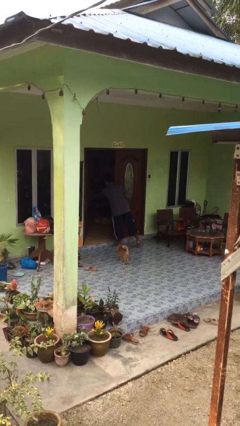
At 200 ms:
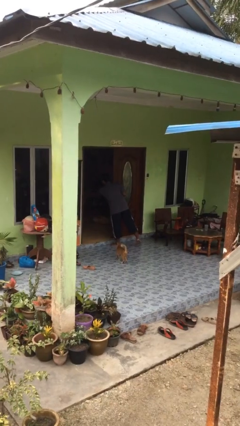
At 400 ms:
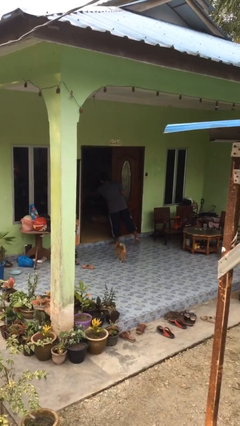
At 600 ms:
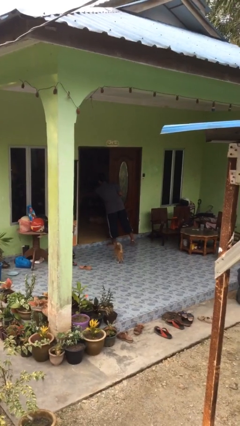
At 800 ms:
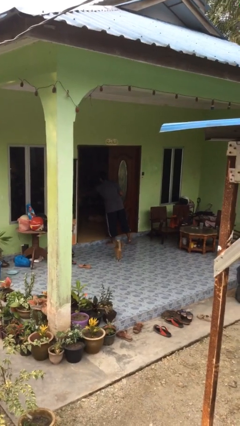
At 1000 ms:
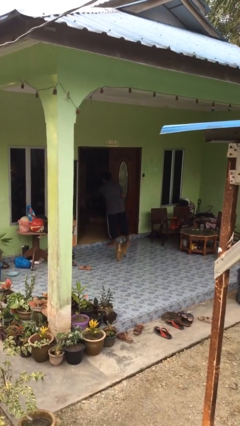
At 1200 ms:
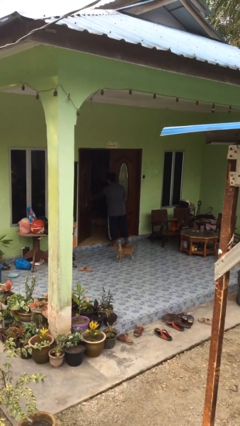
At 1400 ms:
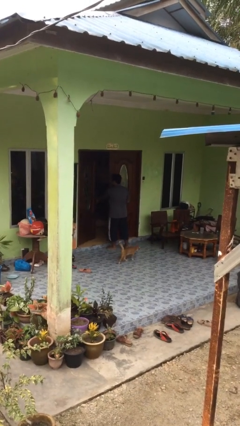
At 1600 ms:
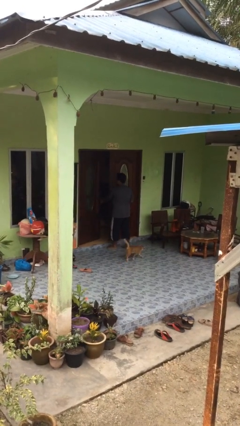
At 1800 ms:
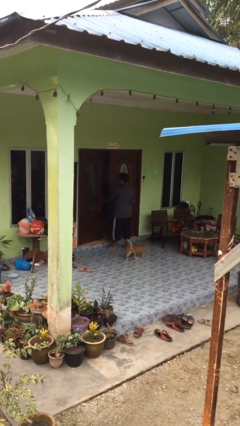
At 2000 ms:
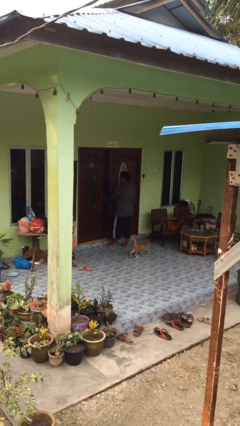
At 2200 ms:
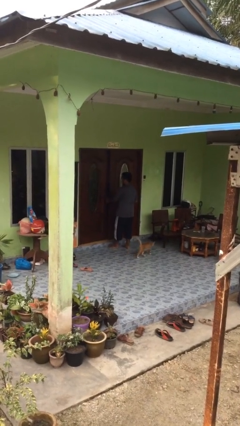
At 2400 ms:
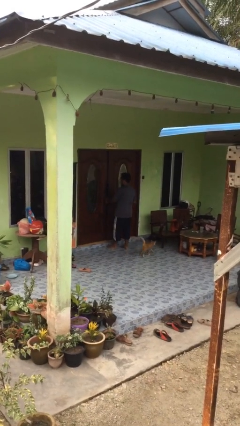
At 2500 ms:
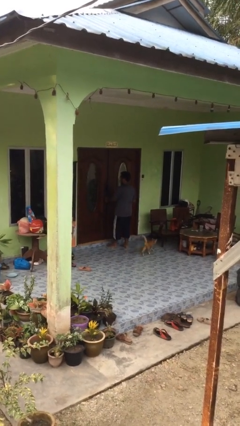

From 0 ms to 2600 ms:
person closes facility door

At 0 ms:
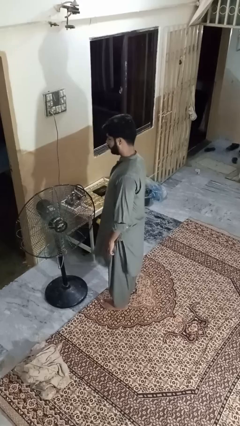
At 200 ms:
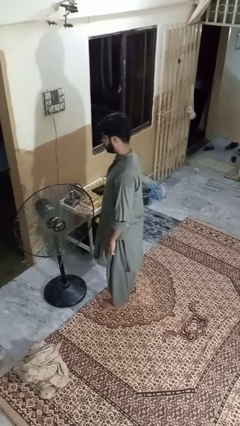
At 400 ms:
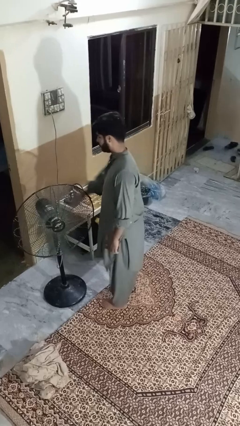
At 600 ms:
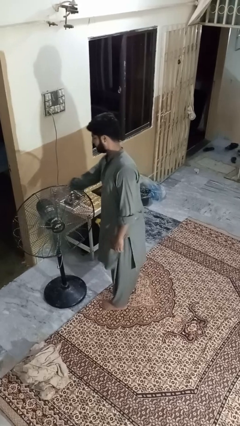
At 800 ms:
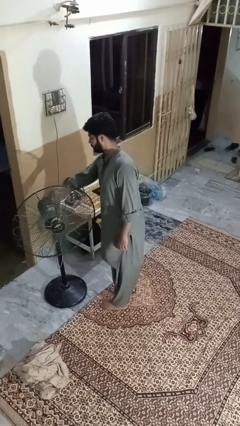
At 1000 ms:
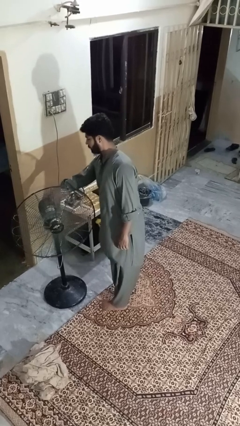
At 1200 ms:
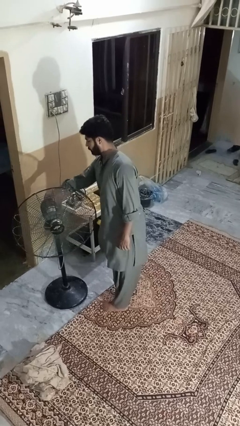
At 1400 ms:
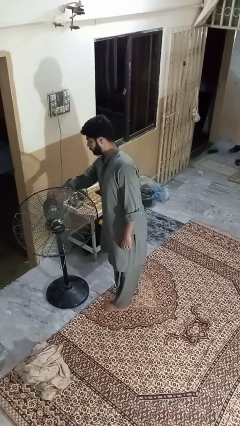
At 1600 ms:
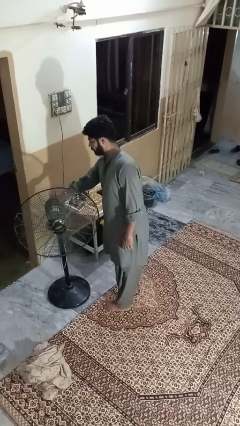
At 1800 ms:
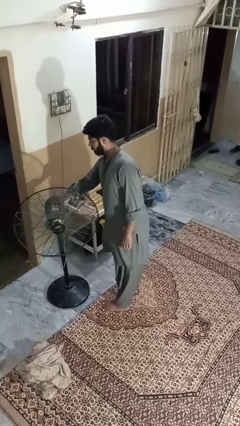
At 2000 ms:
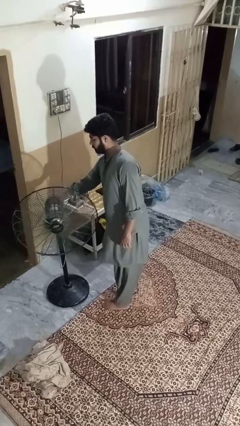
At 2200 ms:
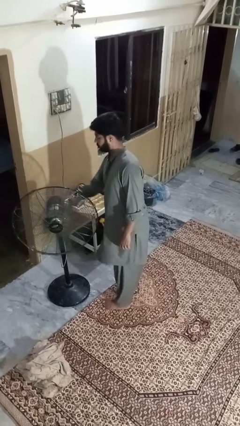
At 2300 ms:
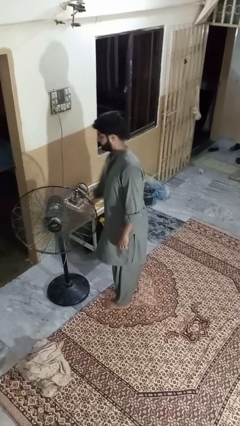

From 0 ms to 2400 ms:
person turns off fan

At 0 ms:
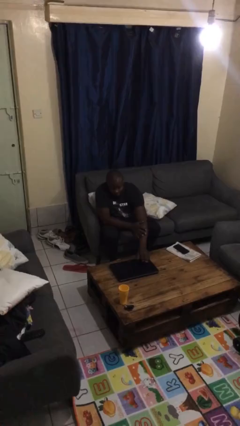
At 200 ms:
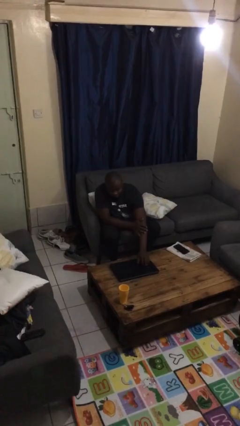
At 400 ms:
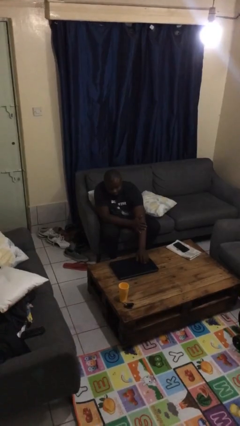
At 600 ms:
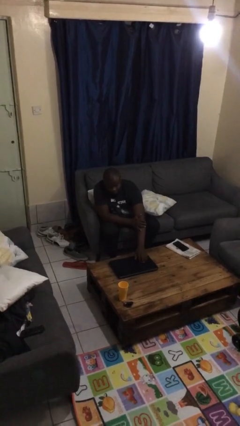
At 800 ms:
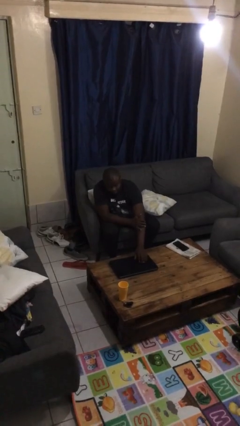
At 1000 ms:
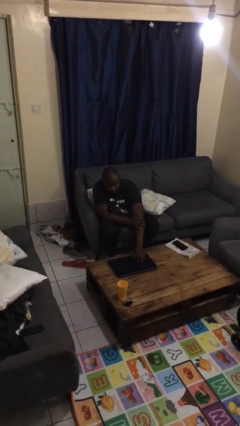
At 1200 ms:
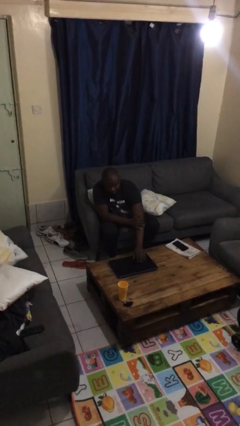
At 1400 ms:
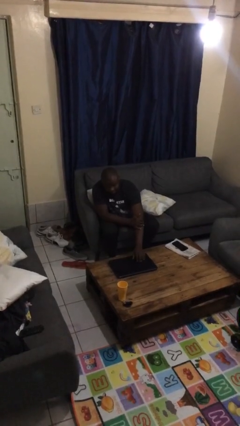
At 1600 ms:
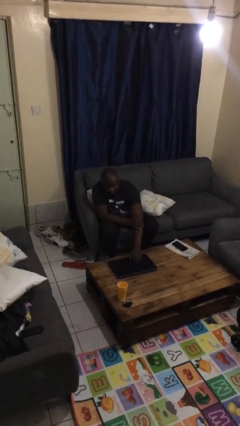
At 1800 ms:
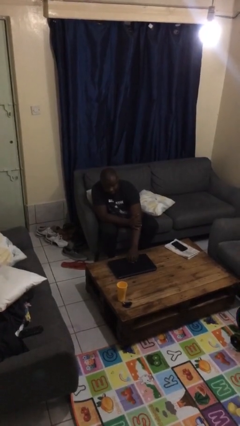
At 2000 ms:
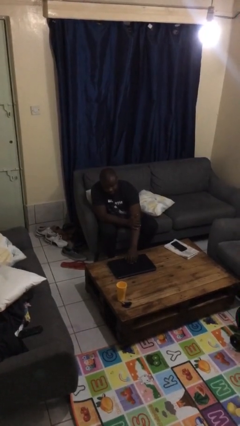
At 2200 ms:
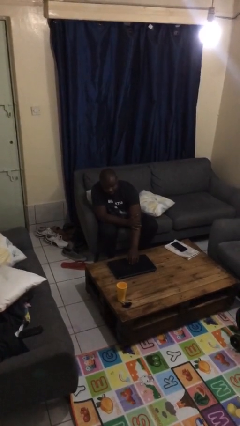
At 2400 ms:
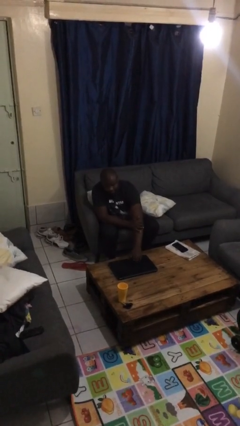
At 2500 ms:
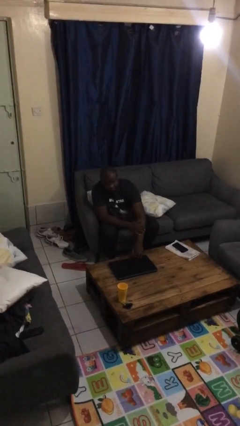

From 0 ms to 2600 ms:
person taps object with finger

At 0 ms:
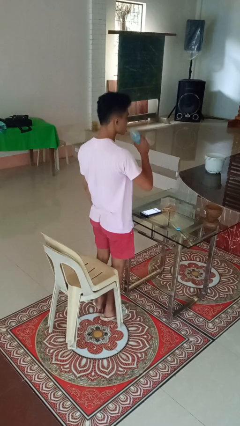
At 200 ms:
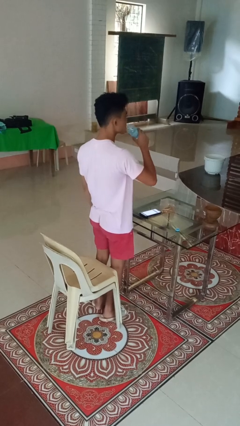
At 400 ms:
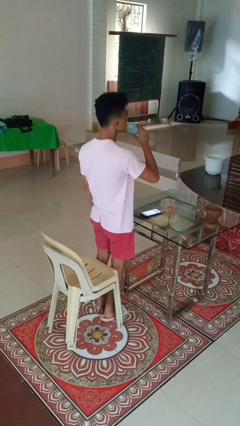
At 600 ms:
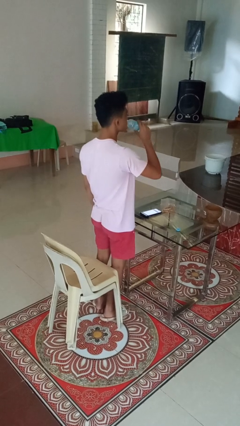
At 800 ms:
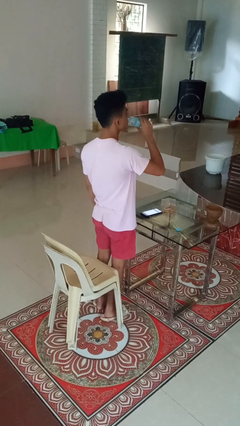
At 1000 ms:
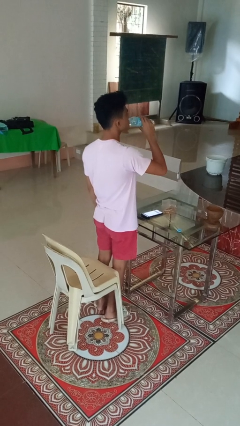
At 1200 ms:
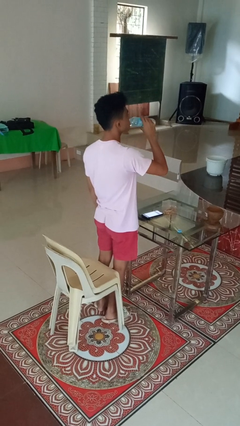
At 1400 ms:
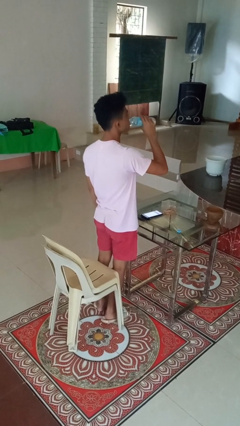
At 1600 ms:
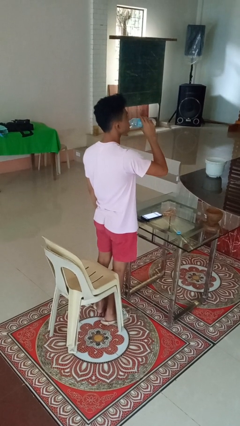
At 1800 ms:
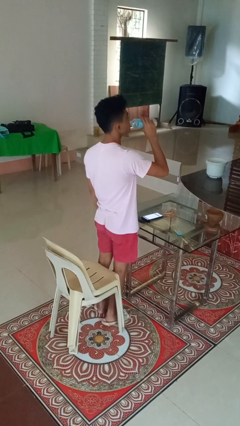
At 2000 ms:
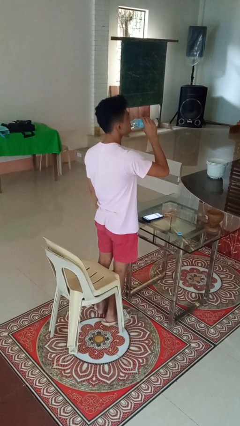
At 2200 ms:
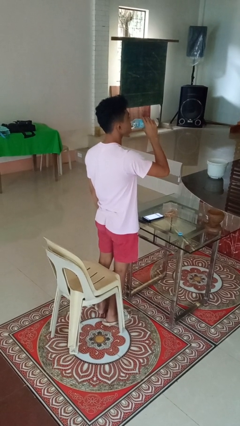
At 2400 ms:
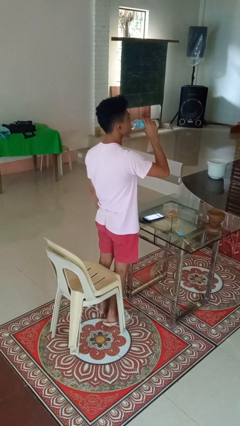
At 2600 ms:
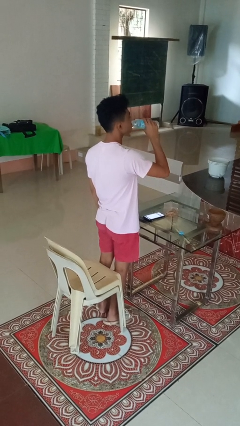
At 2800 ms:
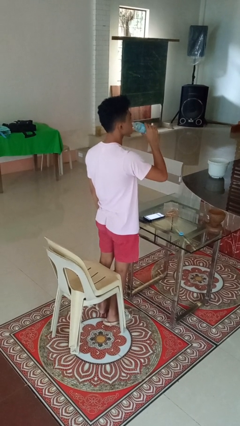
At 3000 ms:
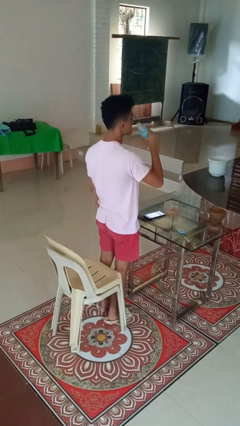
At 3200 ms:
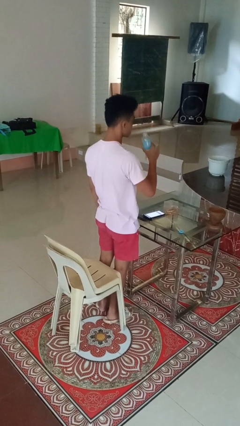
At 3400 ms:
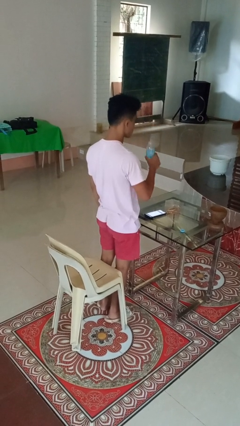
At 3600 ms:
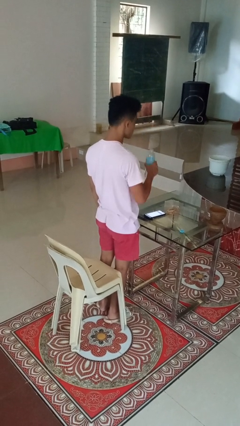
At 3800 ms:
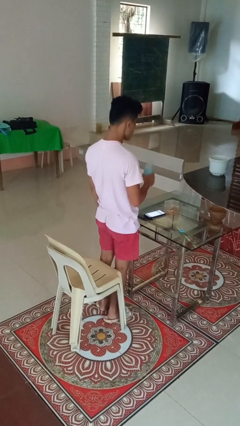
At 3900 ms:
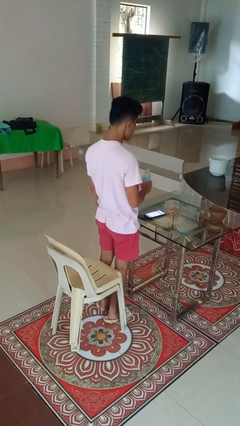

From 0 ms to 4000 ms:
person drinks from bottle

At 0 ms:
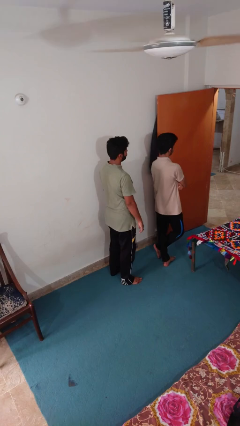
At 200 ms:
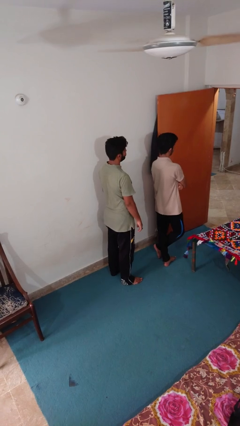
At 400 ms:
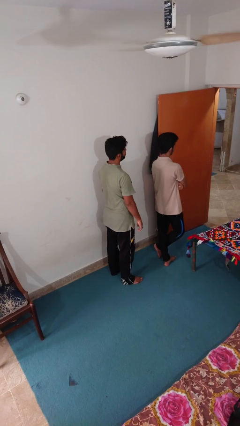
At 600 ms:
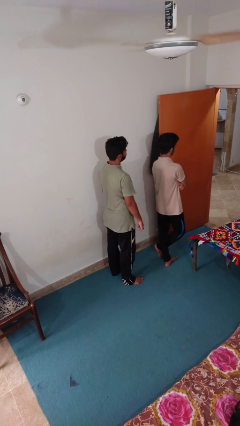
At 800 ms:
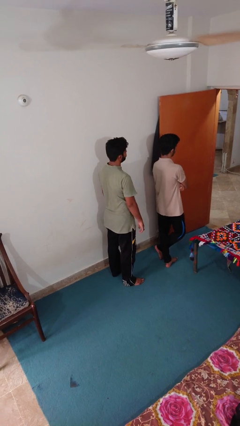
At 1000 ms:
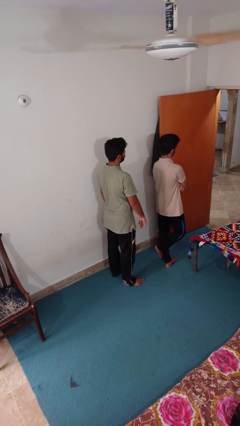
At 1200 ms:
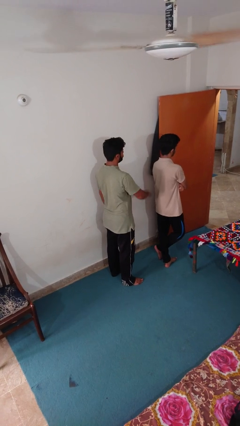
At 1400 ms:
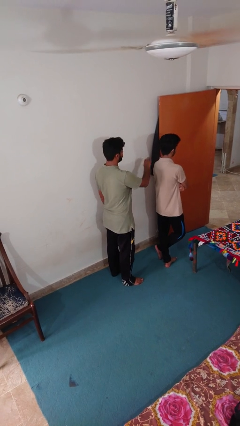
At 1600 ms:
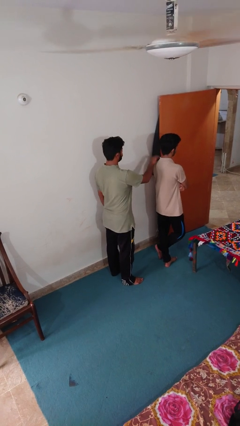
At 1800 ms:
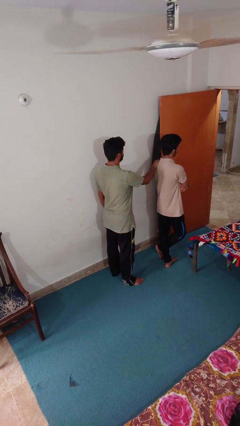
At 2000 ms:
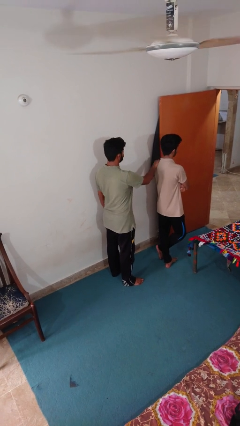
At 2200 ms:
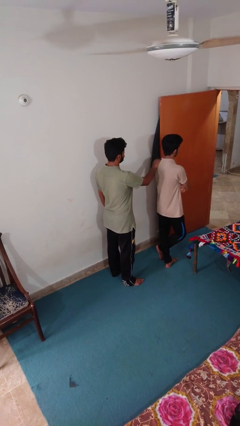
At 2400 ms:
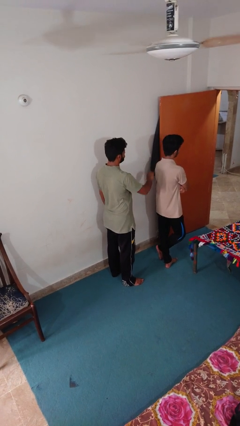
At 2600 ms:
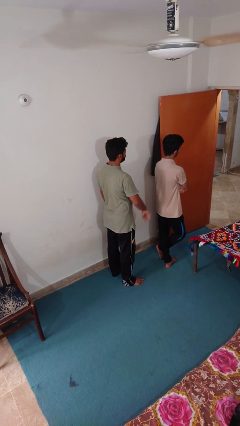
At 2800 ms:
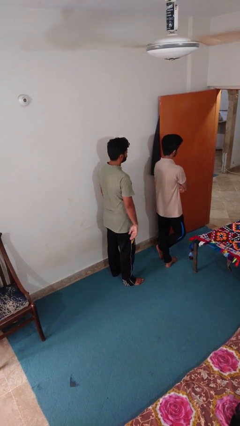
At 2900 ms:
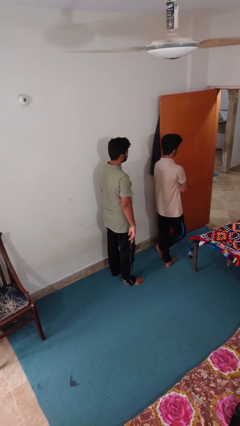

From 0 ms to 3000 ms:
person touches back of person

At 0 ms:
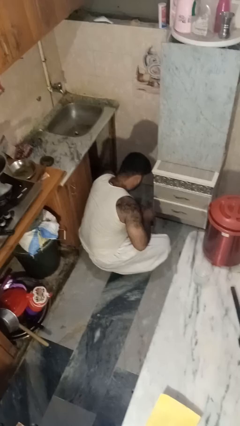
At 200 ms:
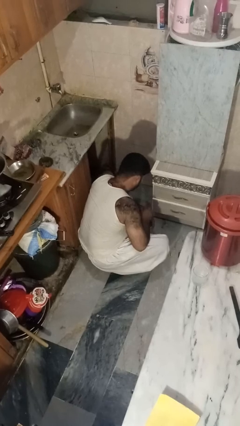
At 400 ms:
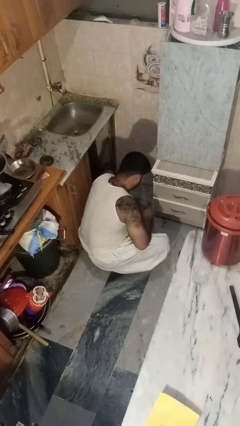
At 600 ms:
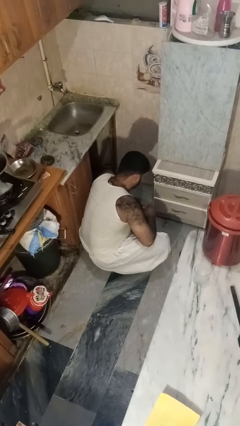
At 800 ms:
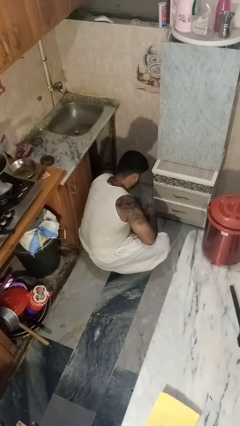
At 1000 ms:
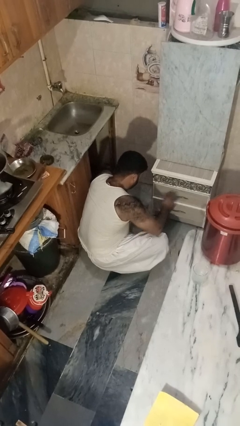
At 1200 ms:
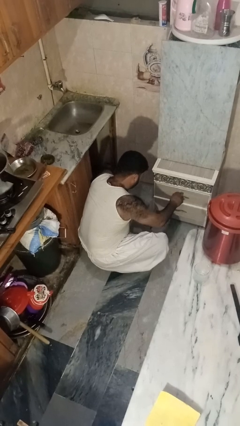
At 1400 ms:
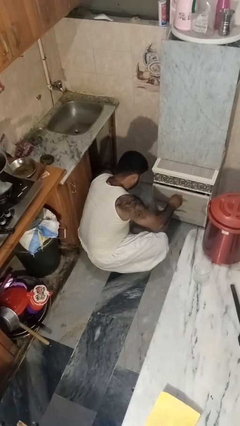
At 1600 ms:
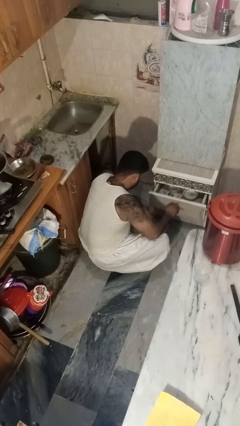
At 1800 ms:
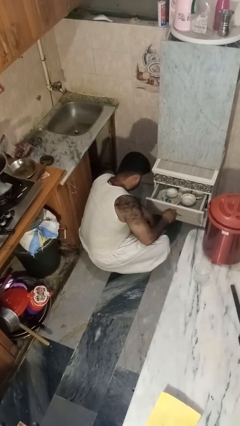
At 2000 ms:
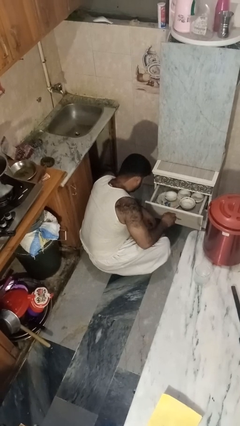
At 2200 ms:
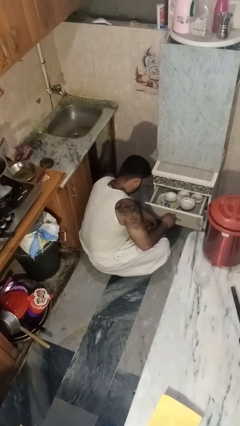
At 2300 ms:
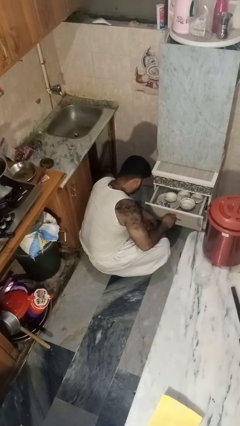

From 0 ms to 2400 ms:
person opens kitchen drawer
